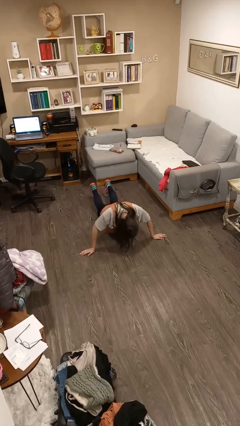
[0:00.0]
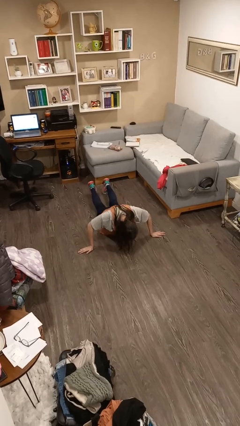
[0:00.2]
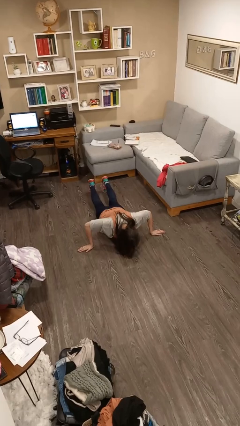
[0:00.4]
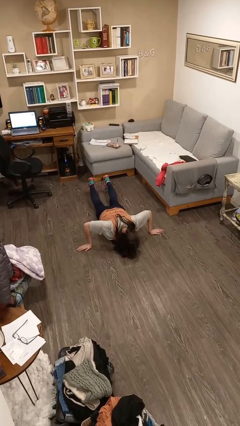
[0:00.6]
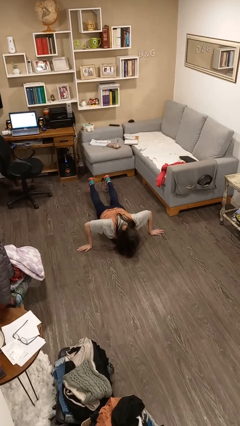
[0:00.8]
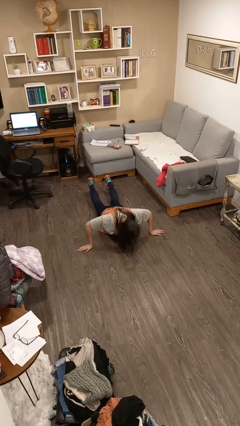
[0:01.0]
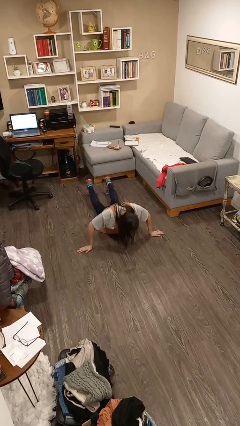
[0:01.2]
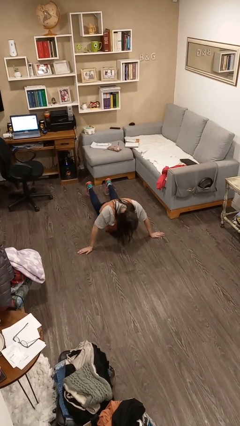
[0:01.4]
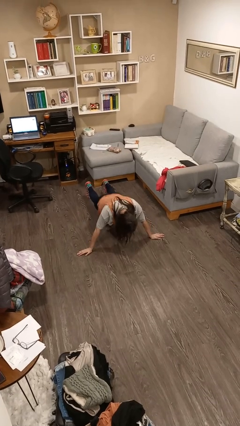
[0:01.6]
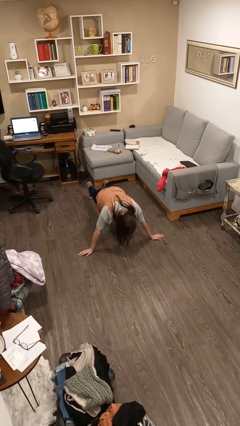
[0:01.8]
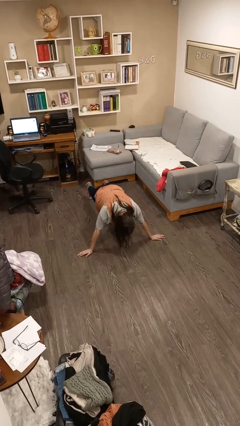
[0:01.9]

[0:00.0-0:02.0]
person exercises with pushup

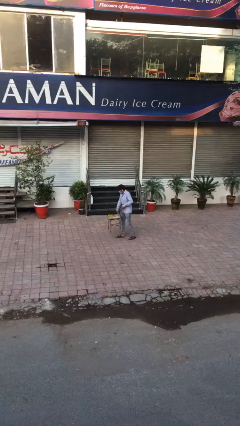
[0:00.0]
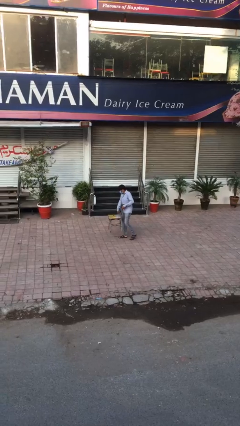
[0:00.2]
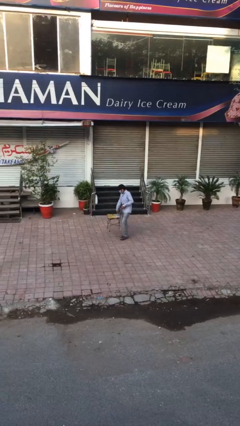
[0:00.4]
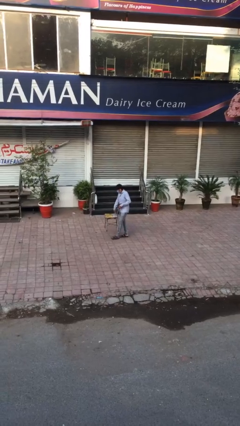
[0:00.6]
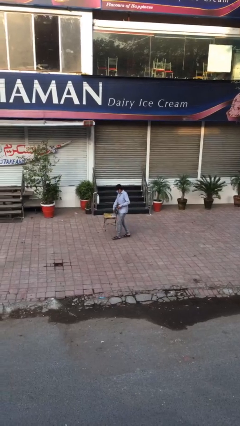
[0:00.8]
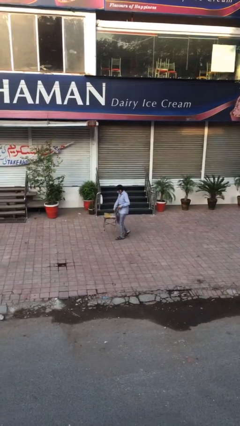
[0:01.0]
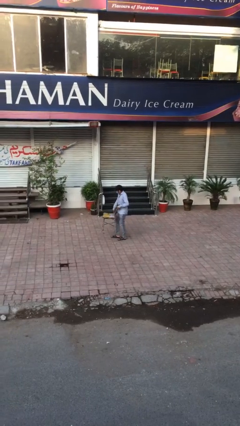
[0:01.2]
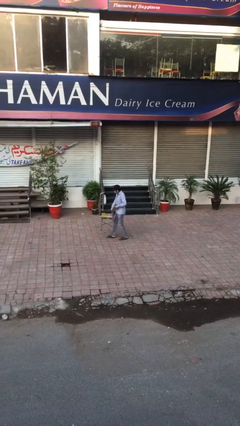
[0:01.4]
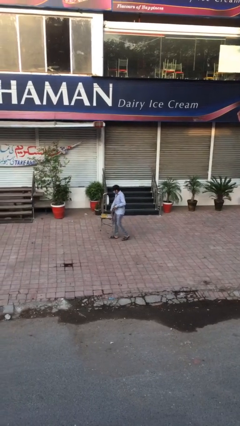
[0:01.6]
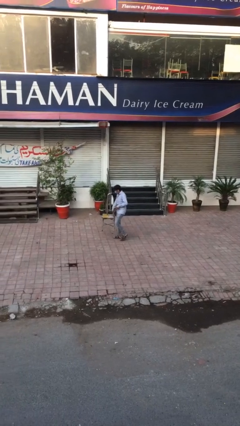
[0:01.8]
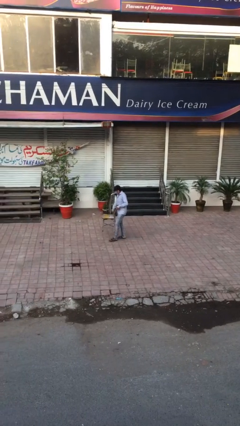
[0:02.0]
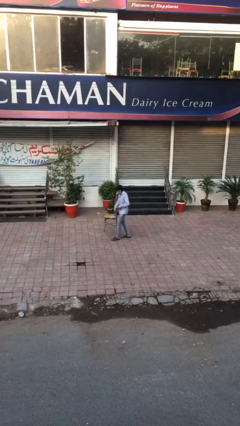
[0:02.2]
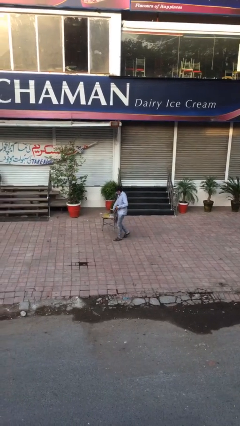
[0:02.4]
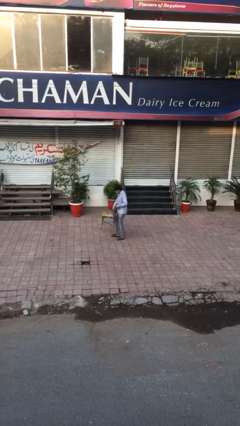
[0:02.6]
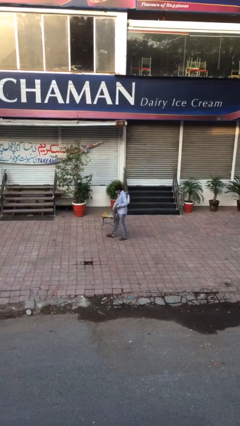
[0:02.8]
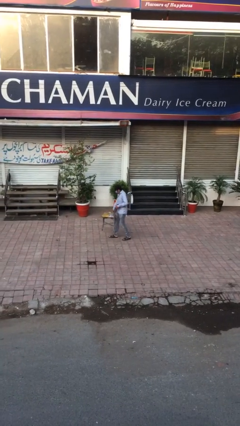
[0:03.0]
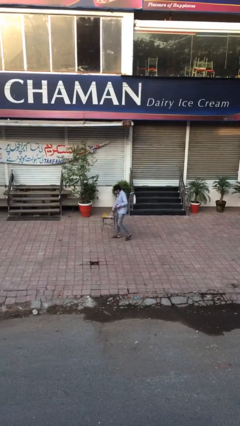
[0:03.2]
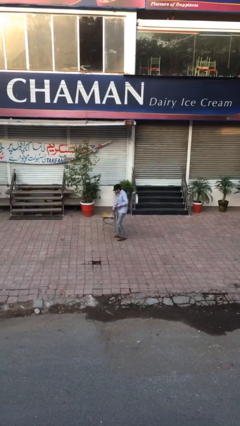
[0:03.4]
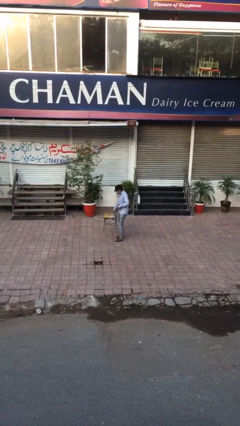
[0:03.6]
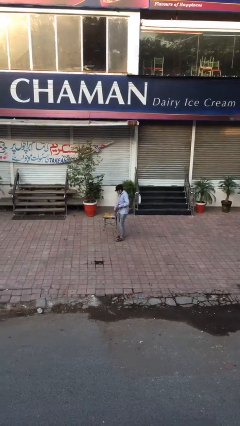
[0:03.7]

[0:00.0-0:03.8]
person carries heavy object

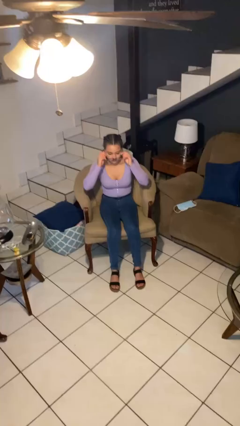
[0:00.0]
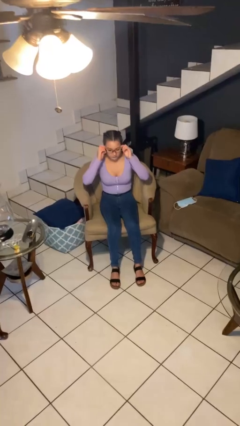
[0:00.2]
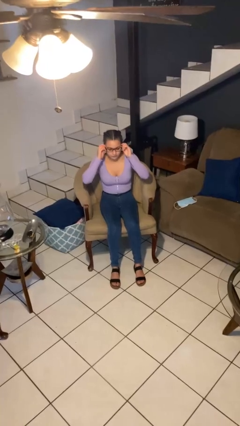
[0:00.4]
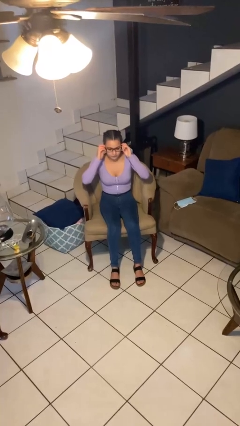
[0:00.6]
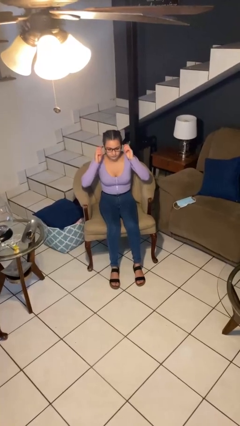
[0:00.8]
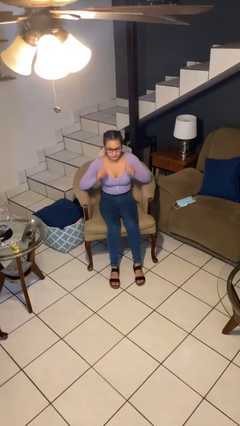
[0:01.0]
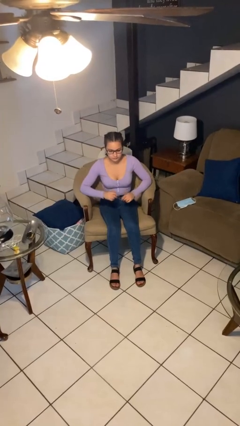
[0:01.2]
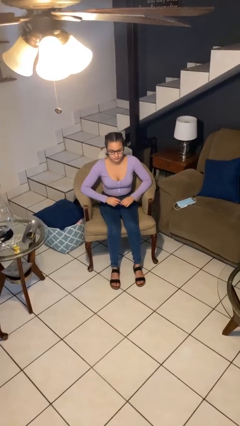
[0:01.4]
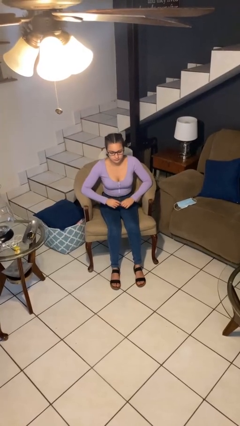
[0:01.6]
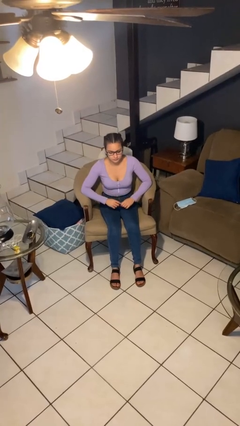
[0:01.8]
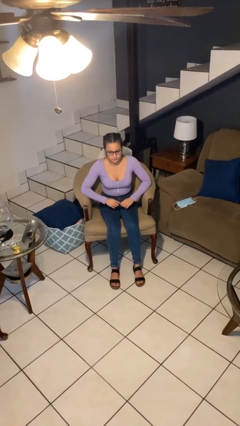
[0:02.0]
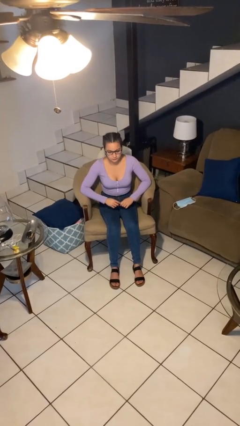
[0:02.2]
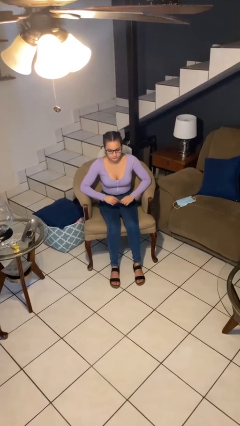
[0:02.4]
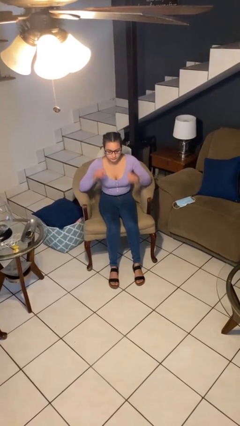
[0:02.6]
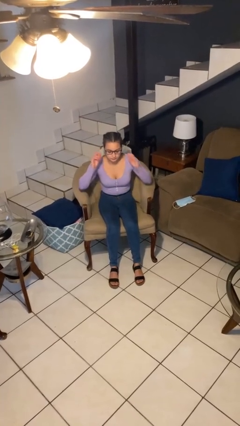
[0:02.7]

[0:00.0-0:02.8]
person puts on glasses

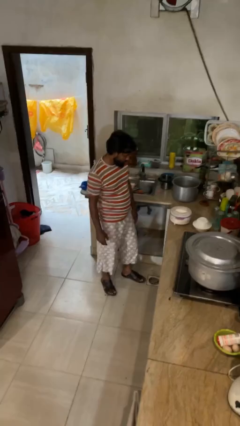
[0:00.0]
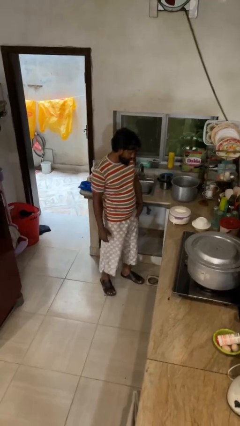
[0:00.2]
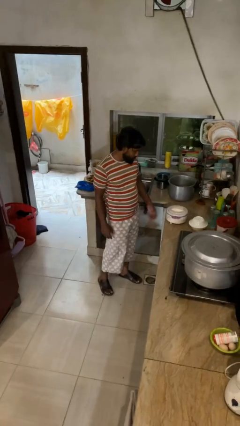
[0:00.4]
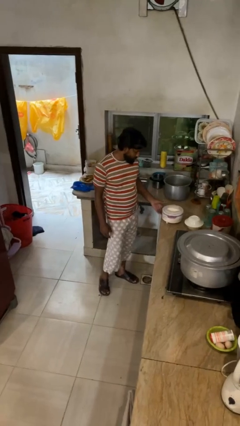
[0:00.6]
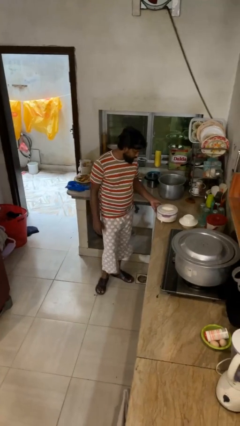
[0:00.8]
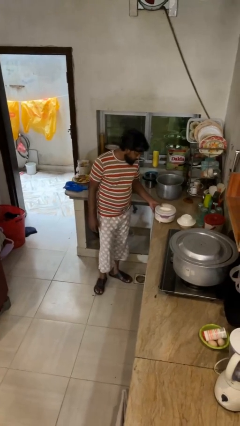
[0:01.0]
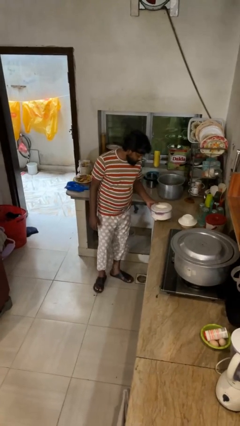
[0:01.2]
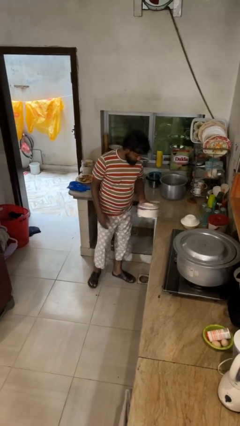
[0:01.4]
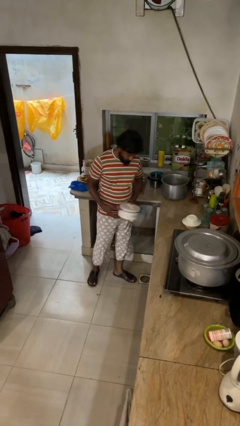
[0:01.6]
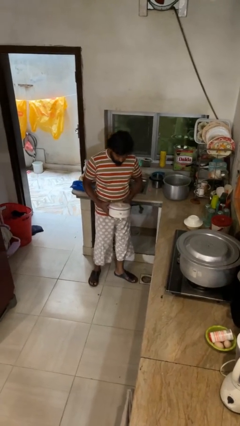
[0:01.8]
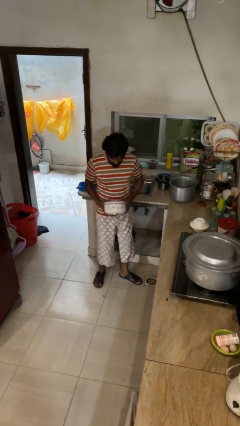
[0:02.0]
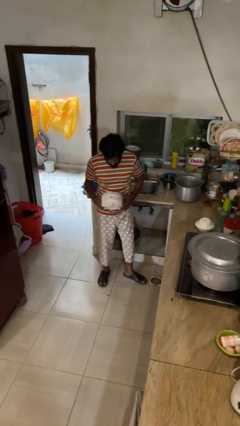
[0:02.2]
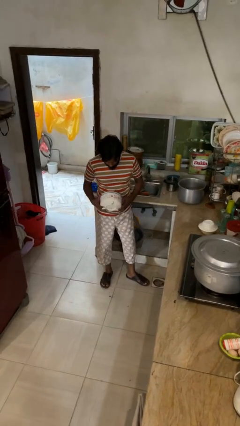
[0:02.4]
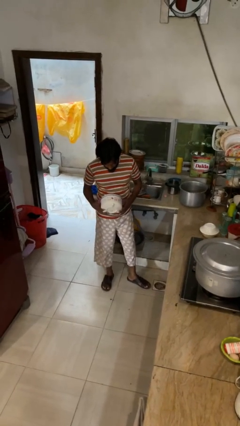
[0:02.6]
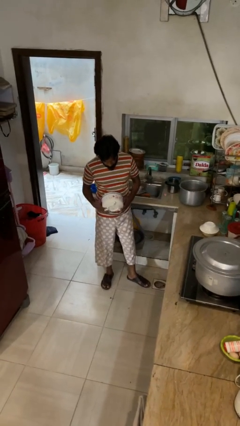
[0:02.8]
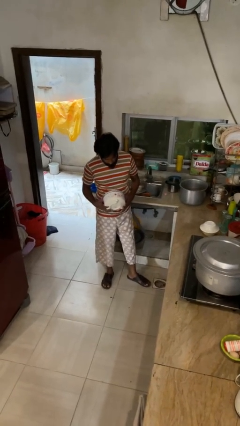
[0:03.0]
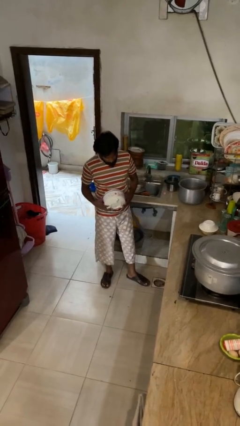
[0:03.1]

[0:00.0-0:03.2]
person picks up object from countertop

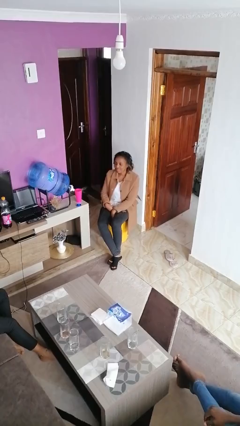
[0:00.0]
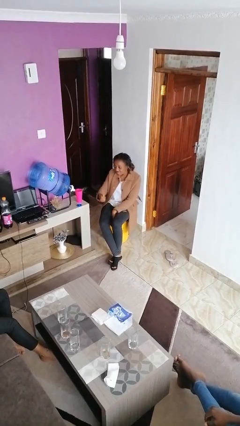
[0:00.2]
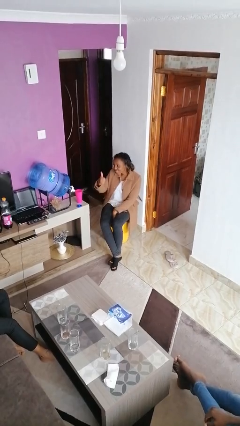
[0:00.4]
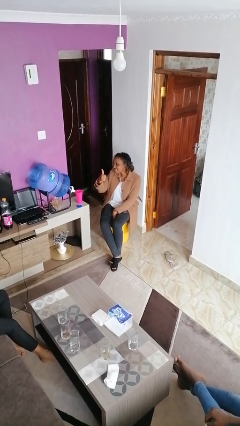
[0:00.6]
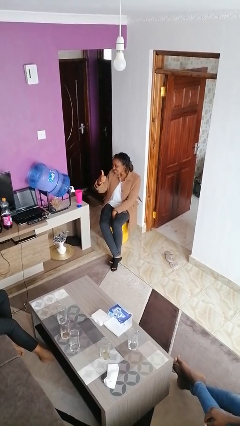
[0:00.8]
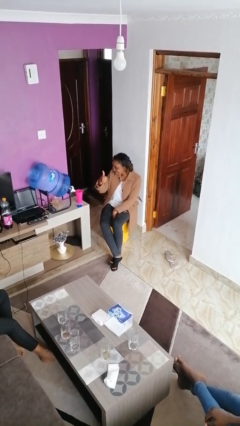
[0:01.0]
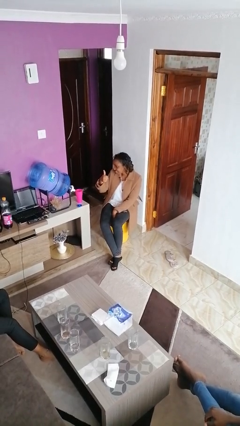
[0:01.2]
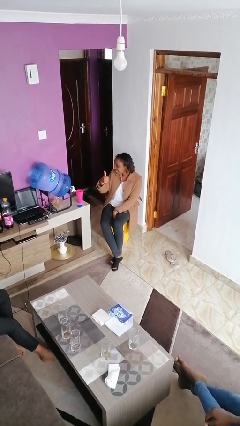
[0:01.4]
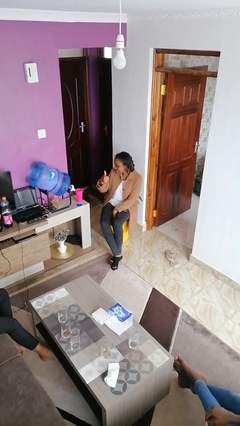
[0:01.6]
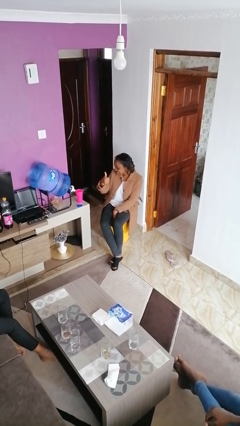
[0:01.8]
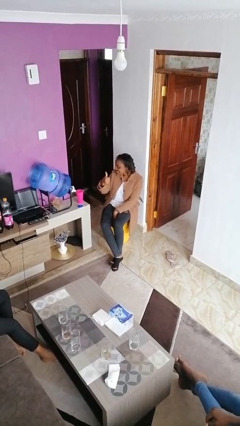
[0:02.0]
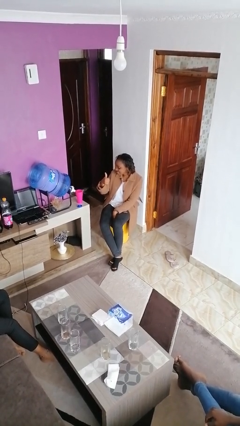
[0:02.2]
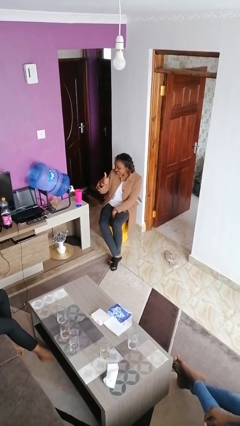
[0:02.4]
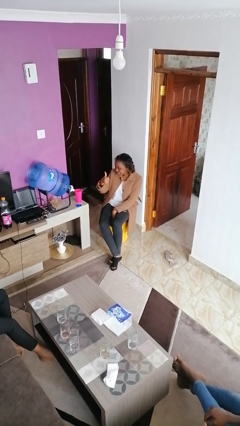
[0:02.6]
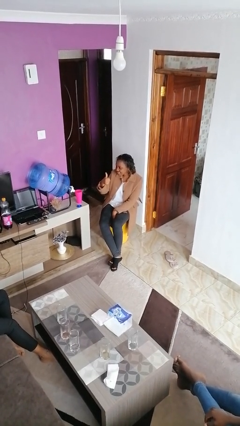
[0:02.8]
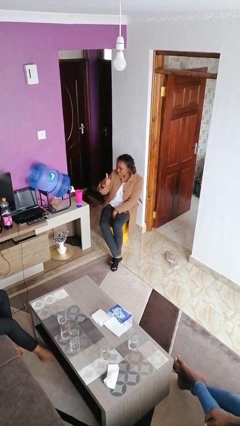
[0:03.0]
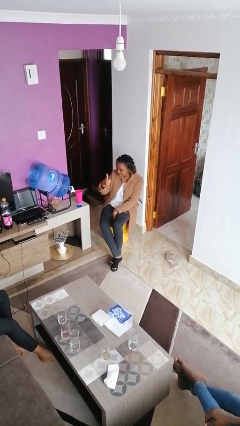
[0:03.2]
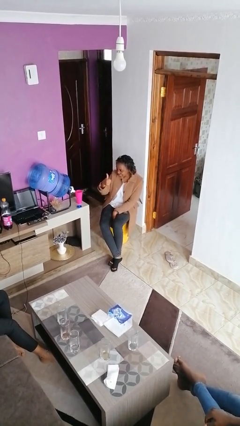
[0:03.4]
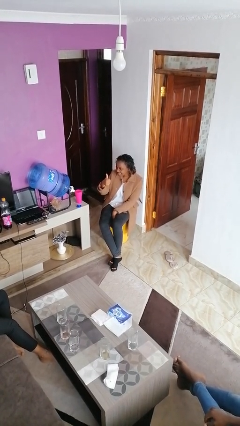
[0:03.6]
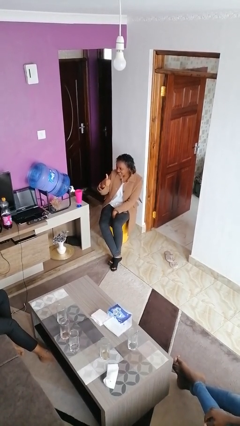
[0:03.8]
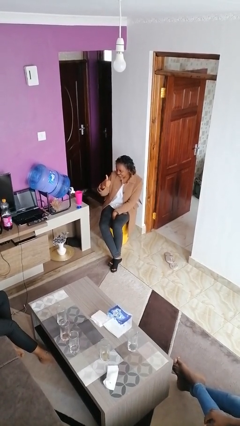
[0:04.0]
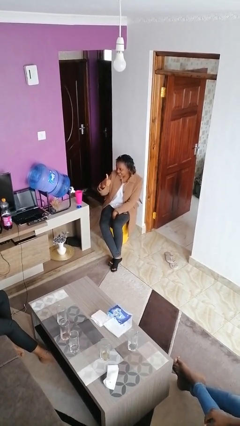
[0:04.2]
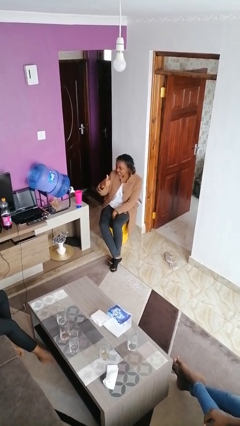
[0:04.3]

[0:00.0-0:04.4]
person gestures thumbs up

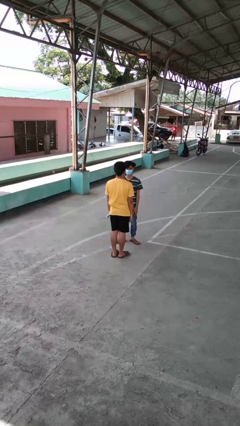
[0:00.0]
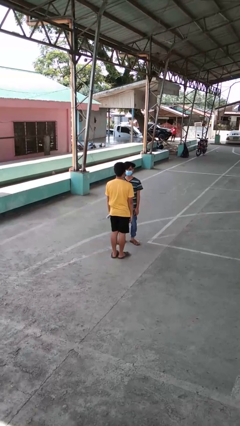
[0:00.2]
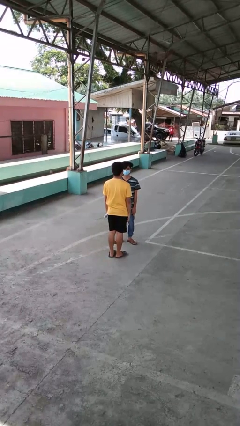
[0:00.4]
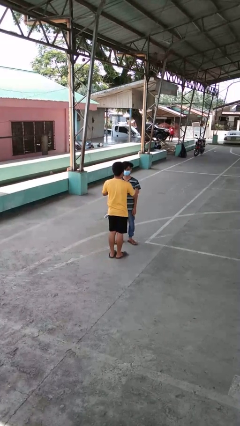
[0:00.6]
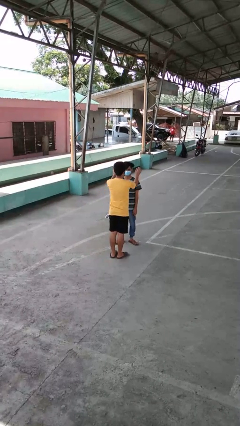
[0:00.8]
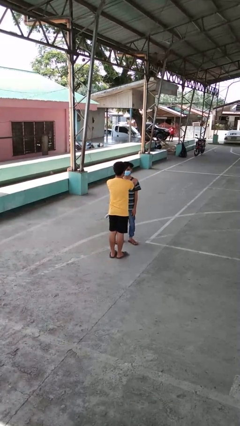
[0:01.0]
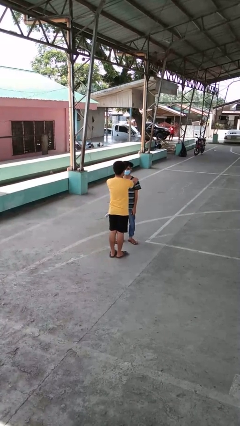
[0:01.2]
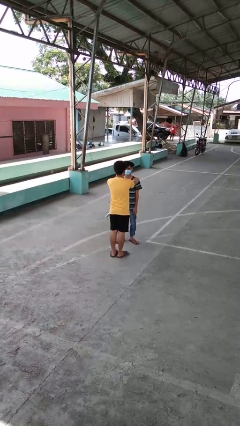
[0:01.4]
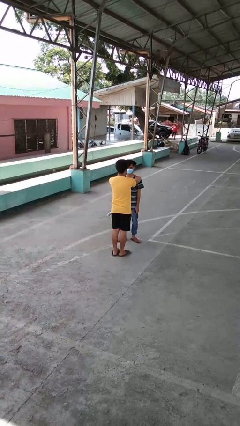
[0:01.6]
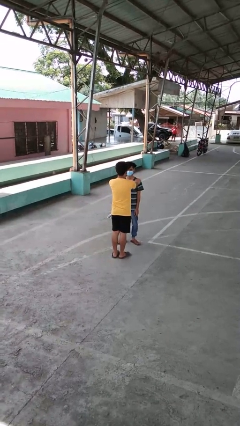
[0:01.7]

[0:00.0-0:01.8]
person grabs person by shoulder
